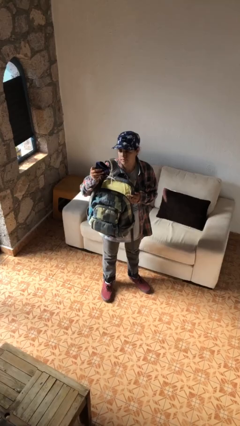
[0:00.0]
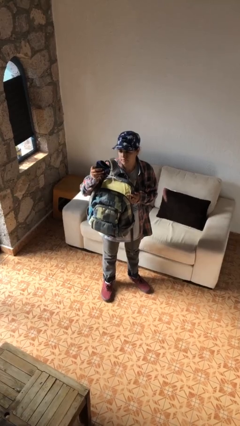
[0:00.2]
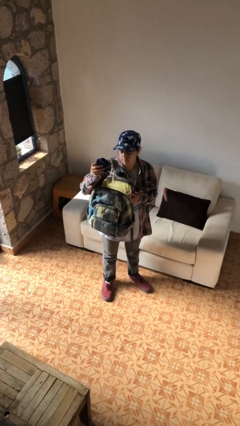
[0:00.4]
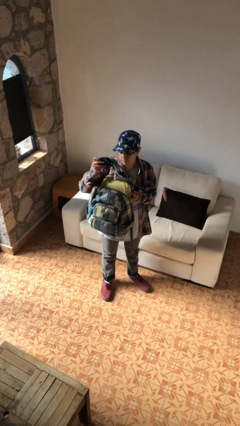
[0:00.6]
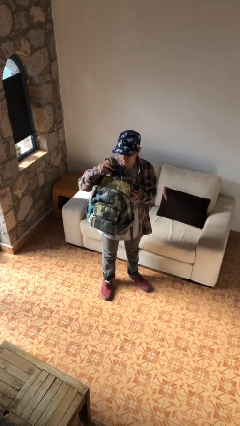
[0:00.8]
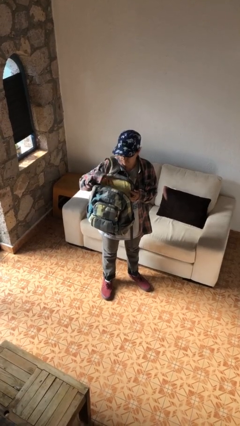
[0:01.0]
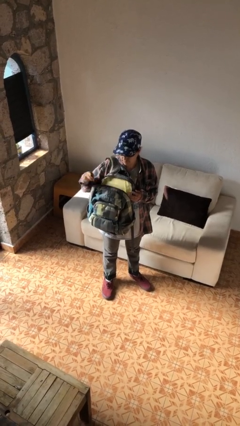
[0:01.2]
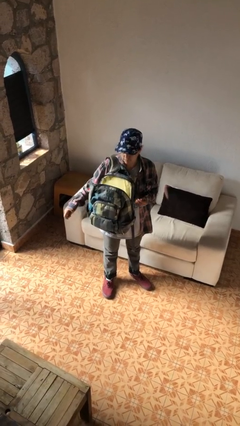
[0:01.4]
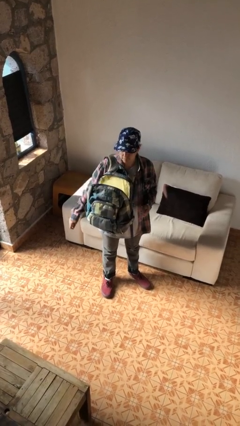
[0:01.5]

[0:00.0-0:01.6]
person puts object into backpack

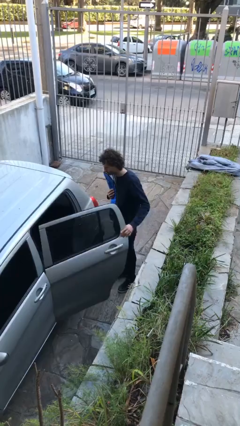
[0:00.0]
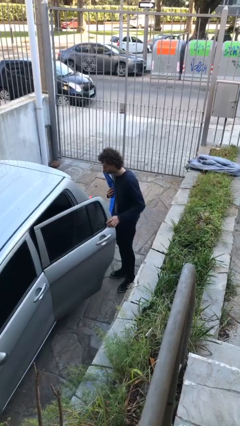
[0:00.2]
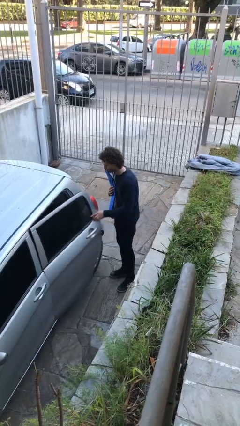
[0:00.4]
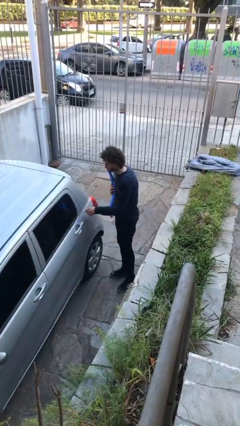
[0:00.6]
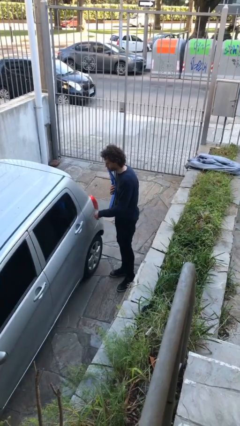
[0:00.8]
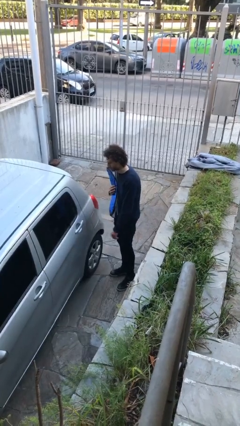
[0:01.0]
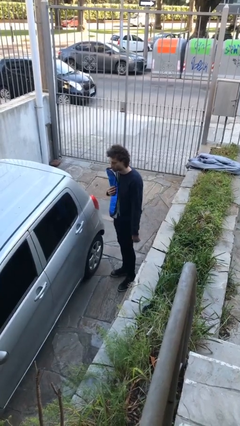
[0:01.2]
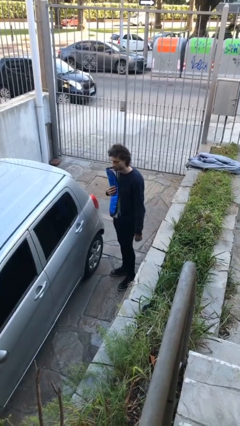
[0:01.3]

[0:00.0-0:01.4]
person closes car door

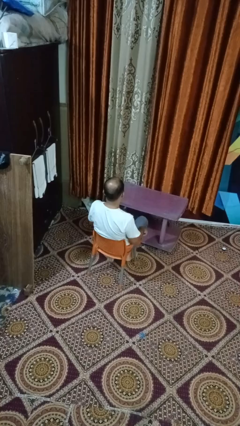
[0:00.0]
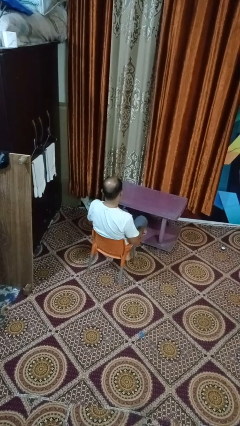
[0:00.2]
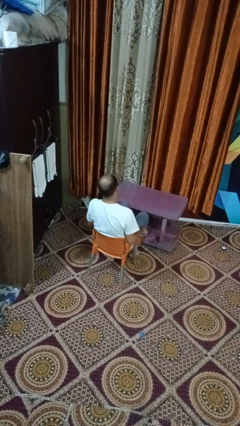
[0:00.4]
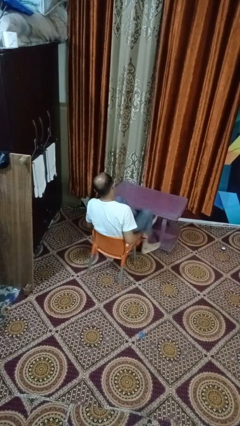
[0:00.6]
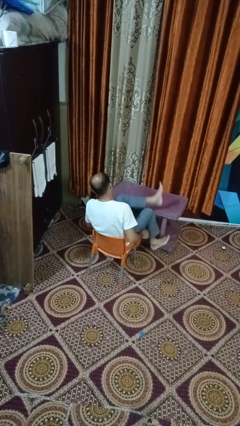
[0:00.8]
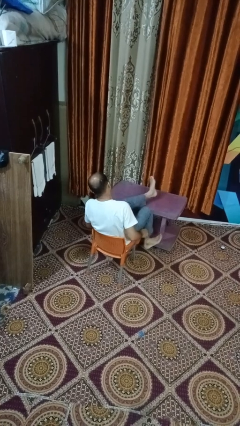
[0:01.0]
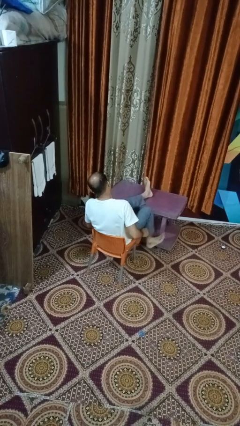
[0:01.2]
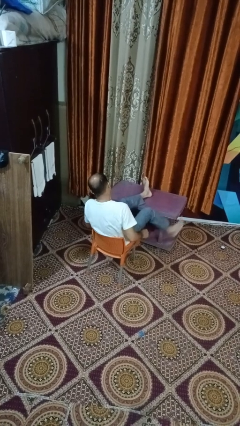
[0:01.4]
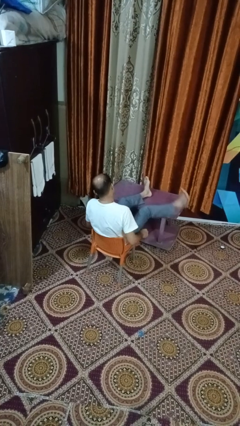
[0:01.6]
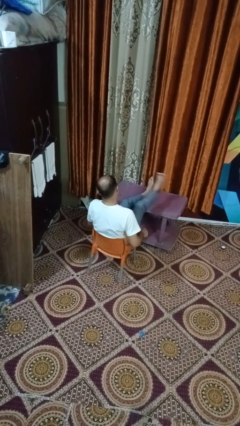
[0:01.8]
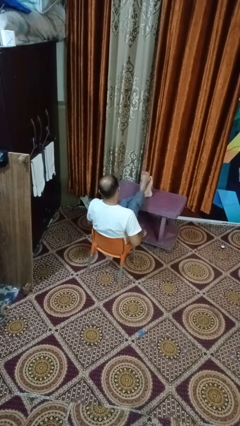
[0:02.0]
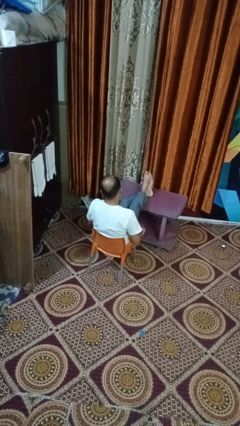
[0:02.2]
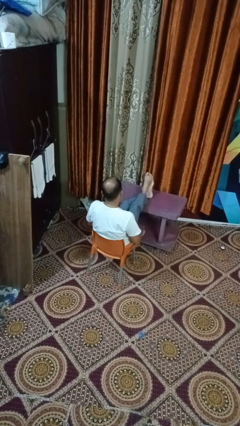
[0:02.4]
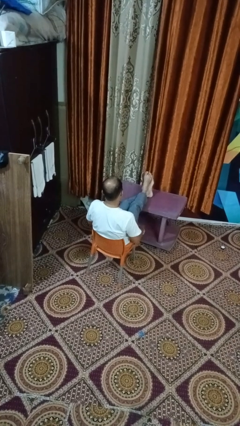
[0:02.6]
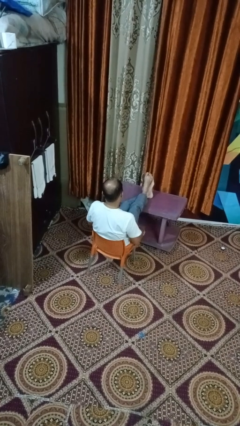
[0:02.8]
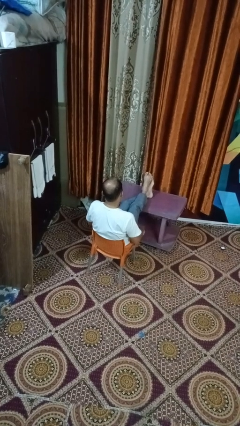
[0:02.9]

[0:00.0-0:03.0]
person puts feet up

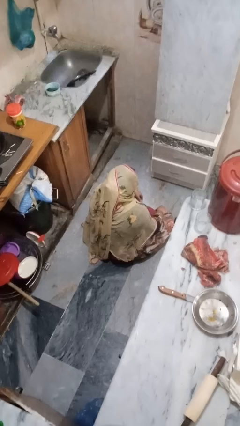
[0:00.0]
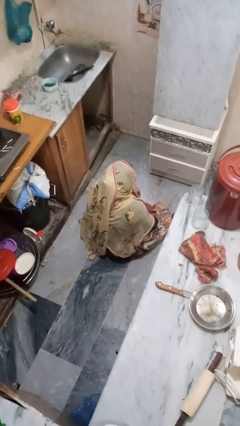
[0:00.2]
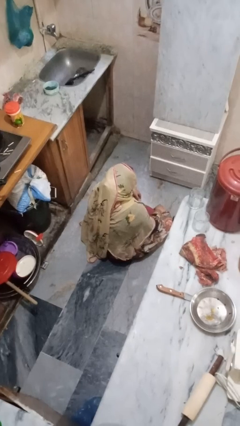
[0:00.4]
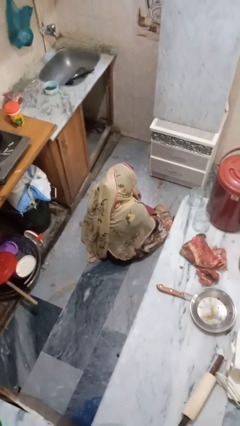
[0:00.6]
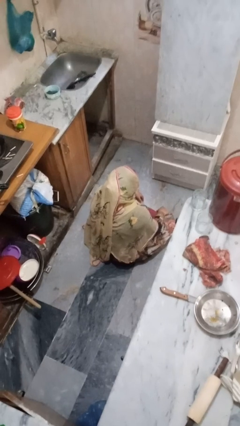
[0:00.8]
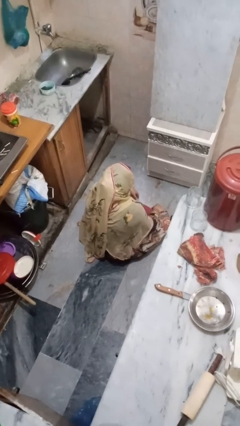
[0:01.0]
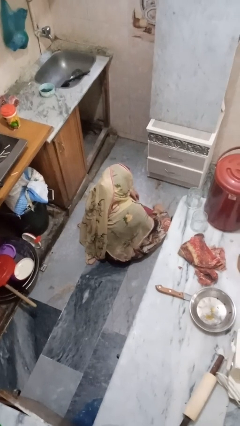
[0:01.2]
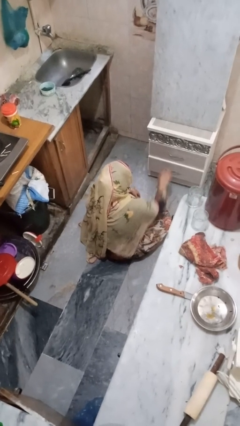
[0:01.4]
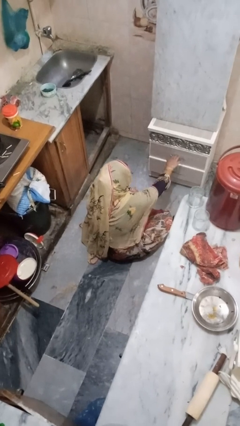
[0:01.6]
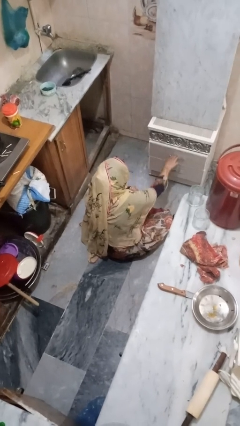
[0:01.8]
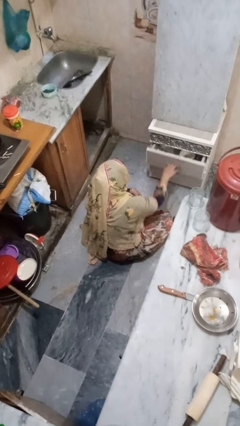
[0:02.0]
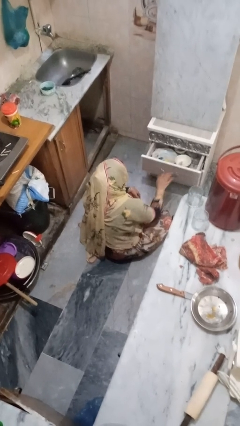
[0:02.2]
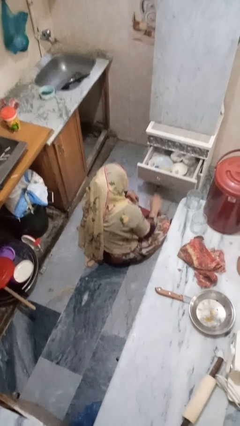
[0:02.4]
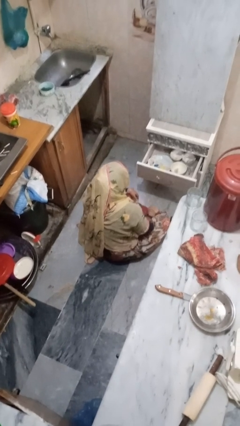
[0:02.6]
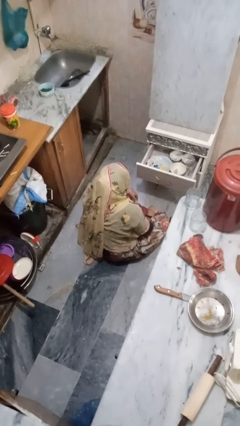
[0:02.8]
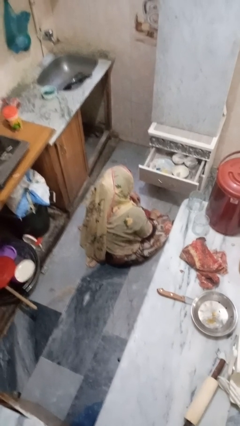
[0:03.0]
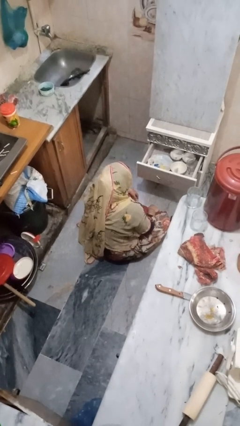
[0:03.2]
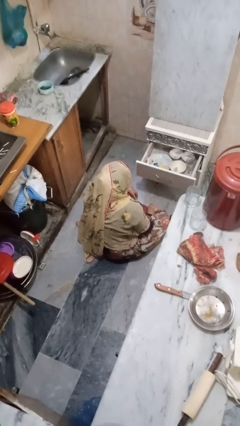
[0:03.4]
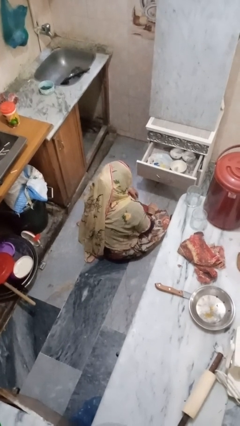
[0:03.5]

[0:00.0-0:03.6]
person opens kitchen drawer

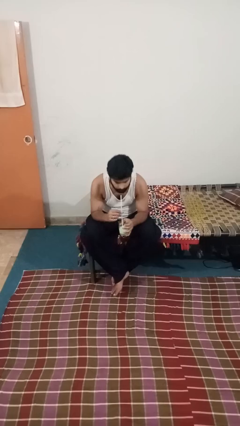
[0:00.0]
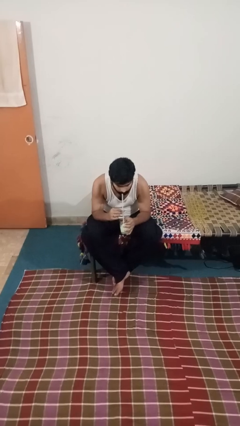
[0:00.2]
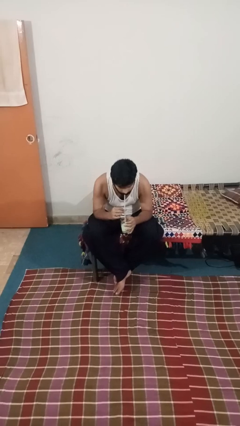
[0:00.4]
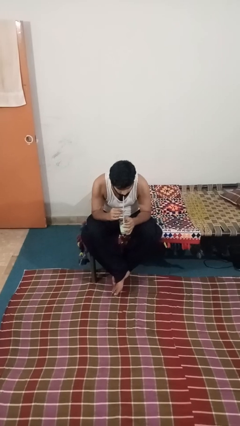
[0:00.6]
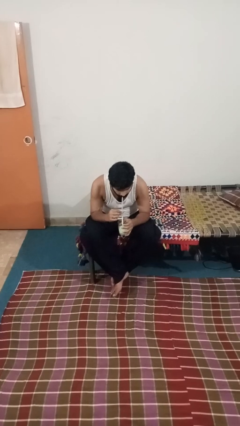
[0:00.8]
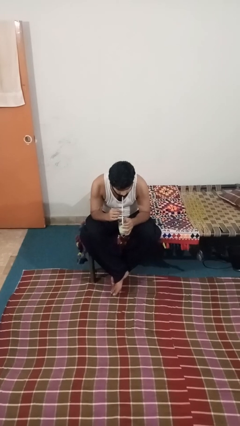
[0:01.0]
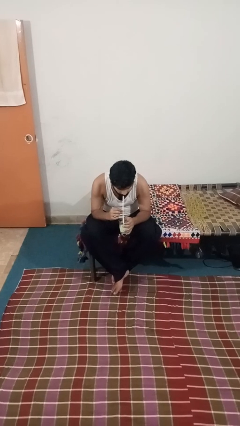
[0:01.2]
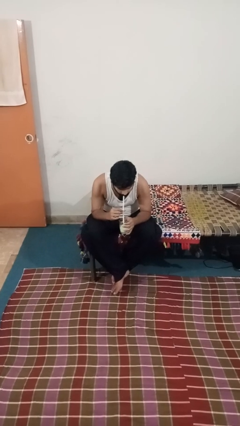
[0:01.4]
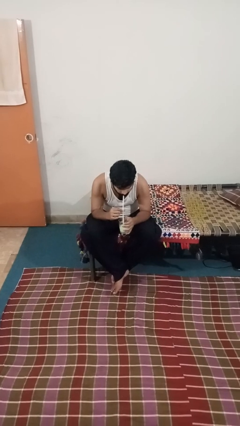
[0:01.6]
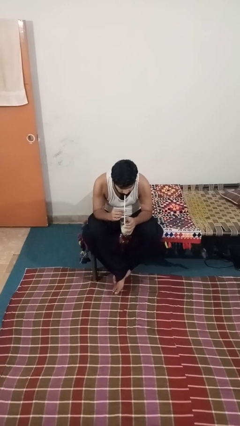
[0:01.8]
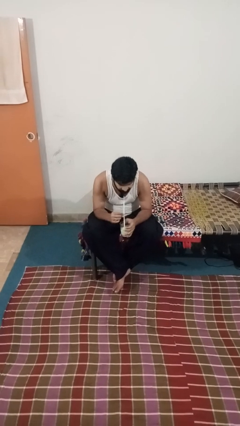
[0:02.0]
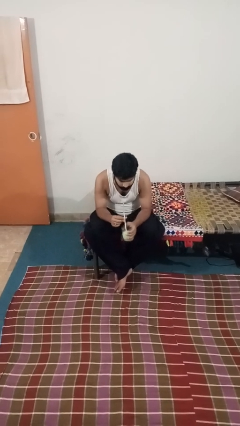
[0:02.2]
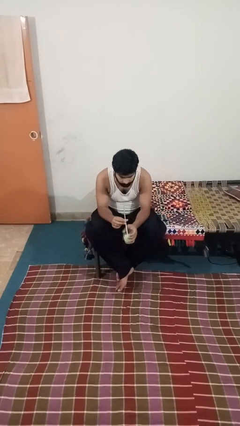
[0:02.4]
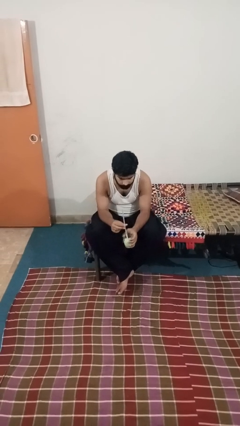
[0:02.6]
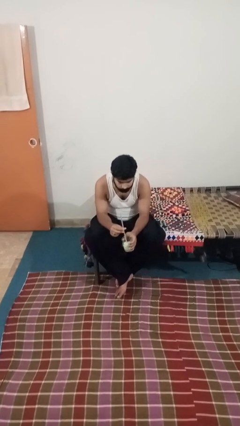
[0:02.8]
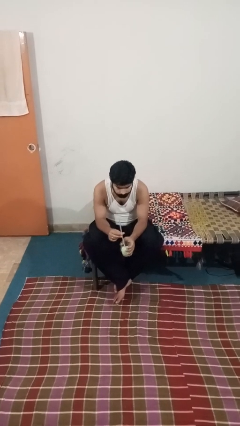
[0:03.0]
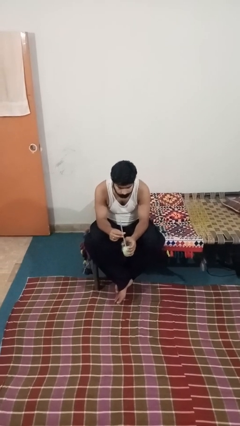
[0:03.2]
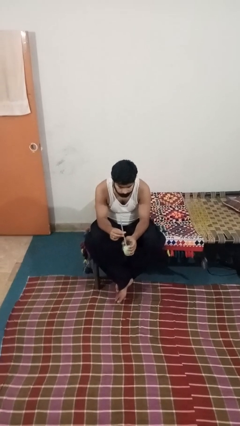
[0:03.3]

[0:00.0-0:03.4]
person drinks from straw

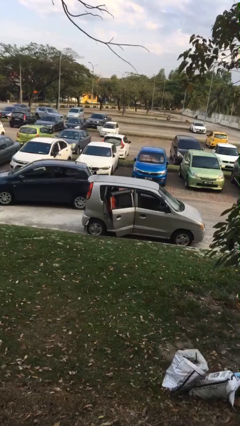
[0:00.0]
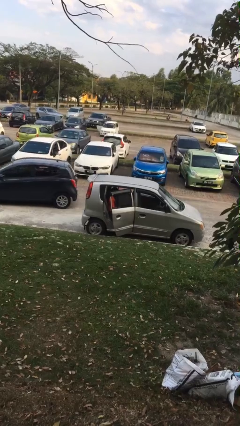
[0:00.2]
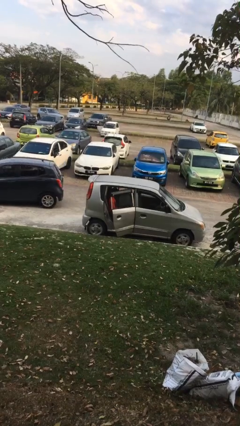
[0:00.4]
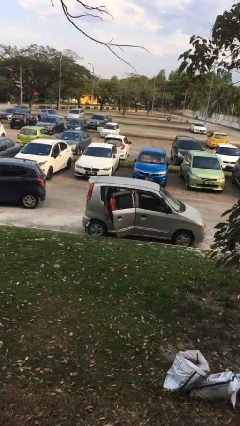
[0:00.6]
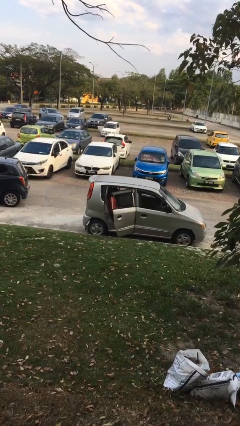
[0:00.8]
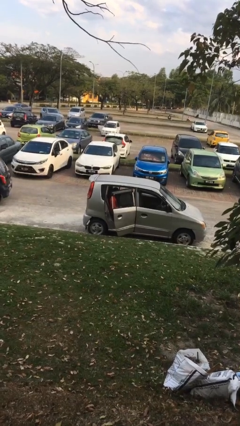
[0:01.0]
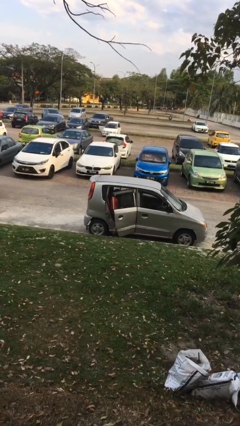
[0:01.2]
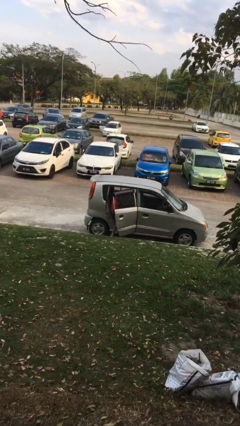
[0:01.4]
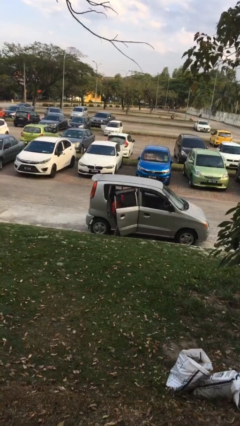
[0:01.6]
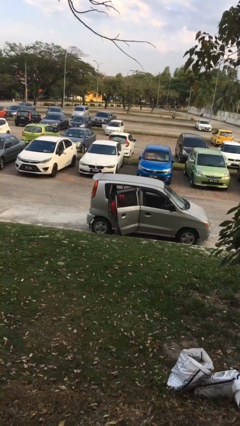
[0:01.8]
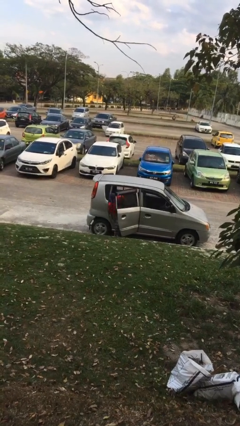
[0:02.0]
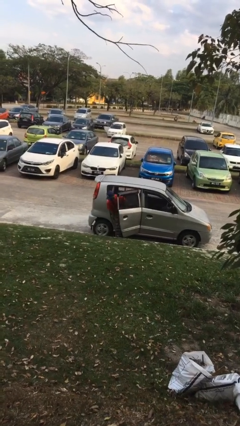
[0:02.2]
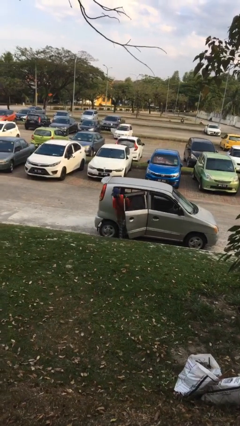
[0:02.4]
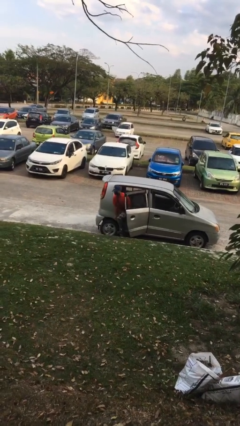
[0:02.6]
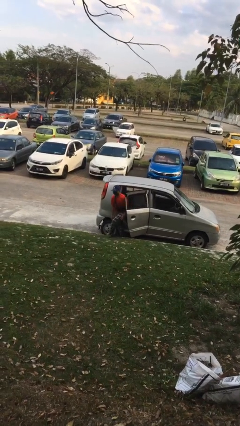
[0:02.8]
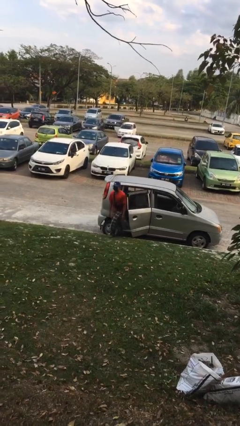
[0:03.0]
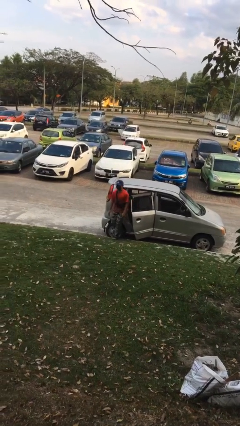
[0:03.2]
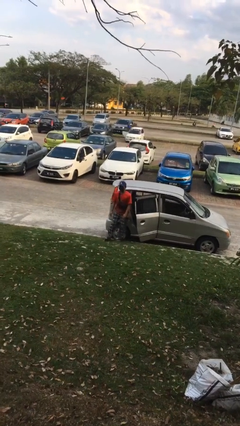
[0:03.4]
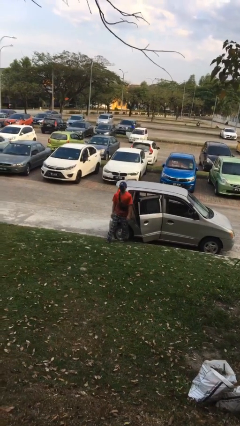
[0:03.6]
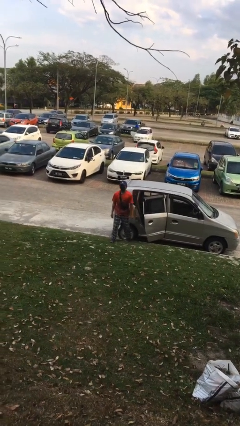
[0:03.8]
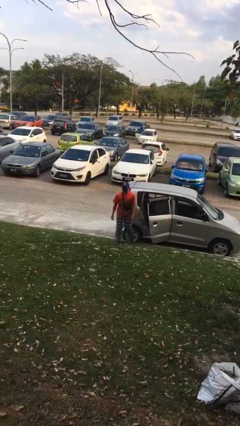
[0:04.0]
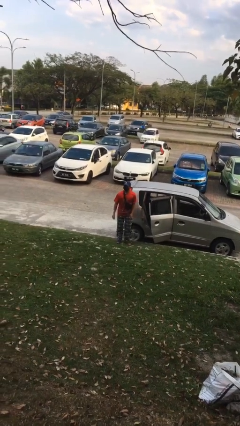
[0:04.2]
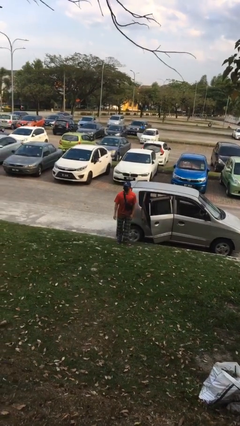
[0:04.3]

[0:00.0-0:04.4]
person exits car
